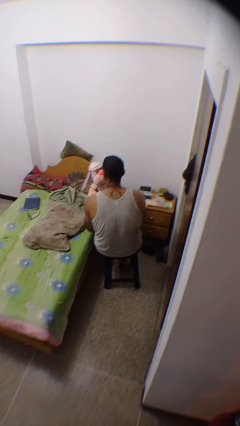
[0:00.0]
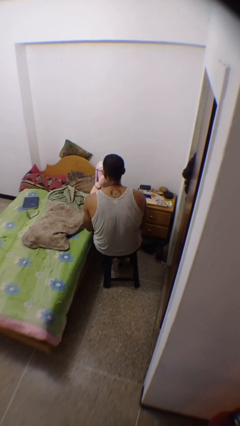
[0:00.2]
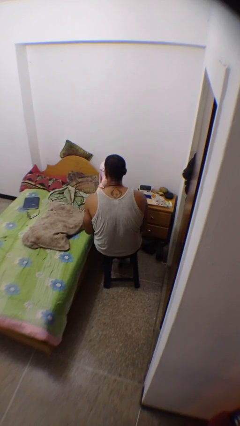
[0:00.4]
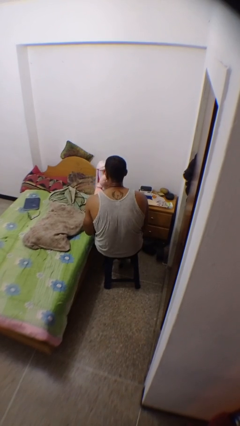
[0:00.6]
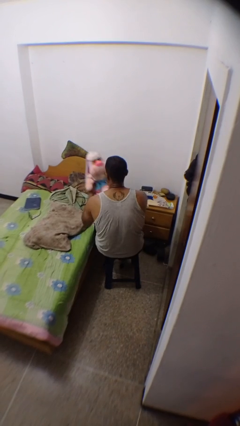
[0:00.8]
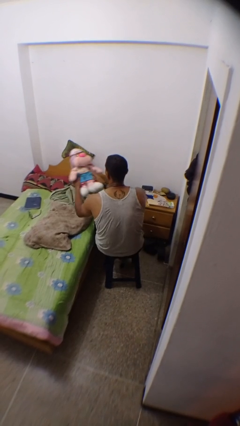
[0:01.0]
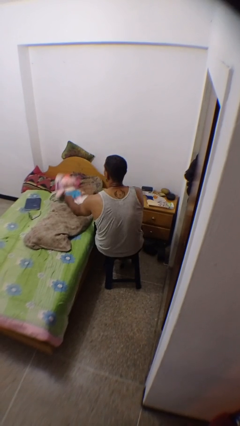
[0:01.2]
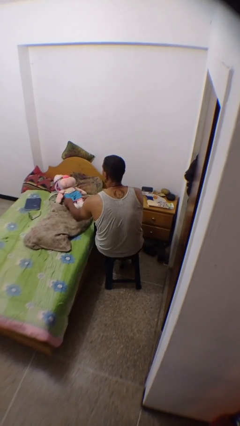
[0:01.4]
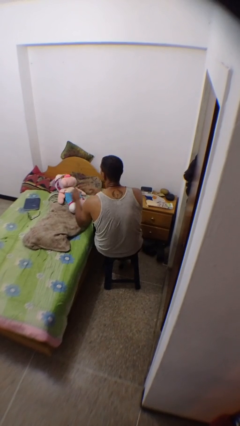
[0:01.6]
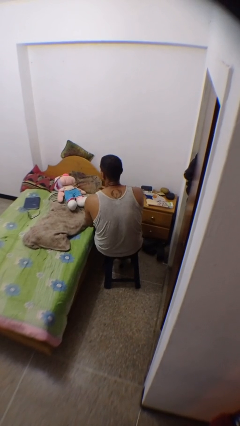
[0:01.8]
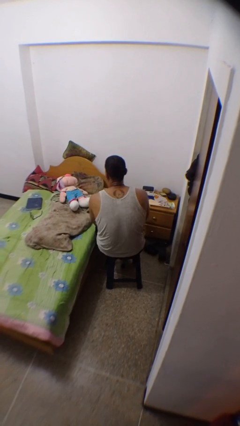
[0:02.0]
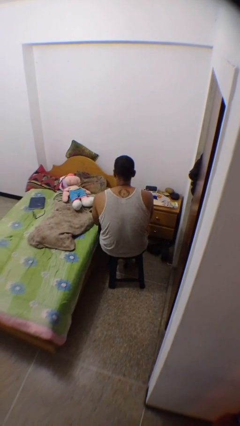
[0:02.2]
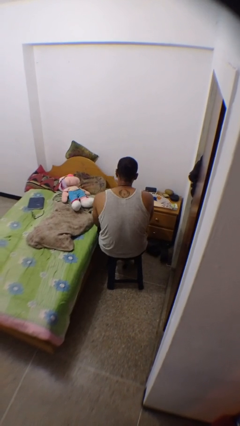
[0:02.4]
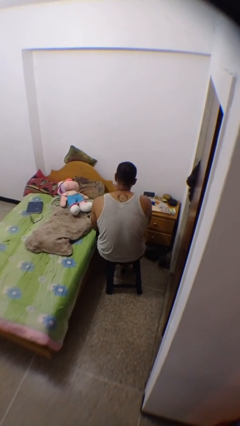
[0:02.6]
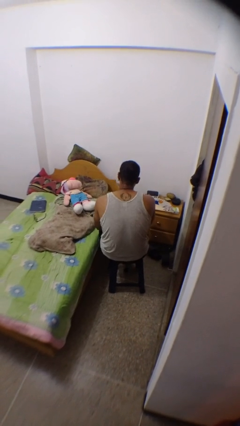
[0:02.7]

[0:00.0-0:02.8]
person puts down object on bed

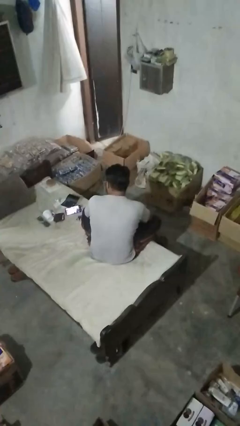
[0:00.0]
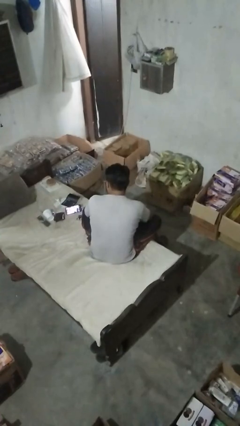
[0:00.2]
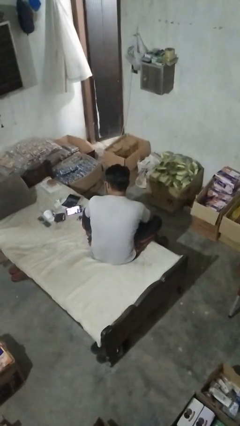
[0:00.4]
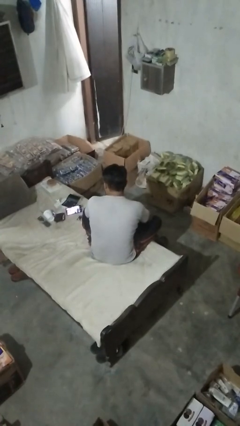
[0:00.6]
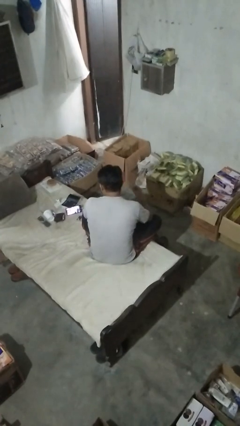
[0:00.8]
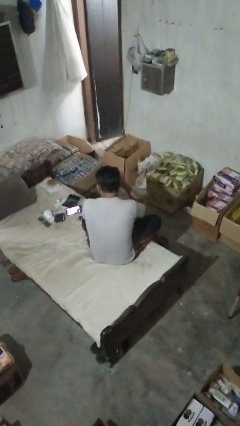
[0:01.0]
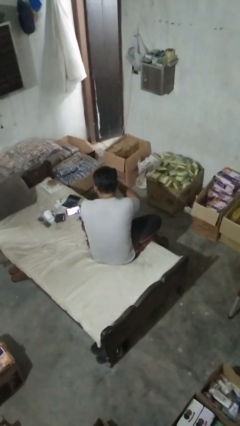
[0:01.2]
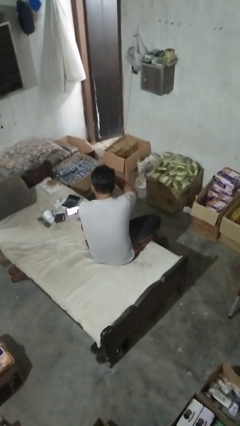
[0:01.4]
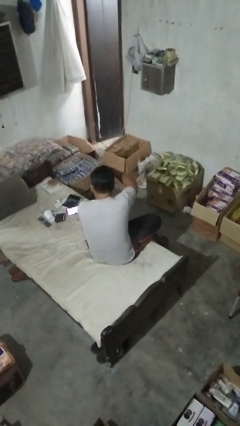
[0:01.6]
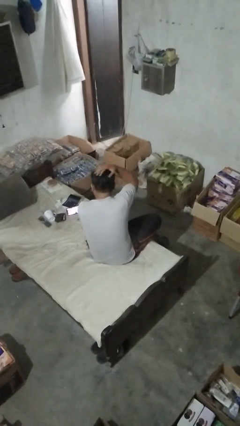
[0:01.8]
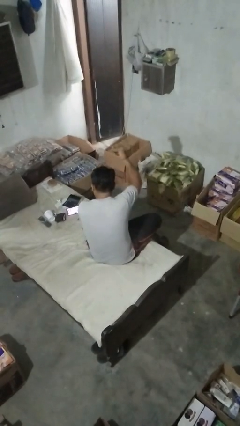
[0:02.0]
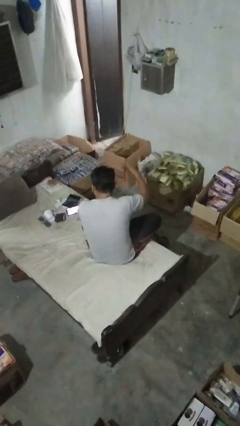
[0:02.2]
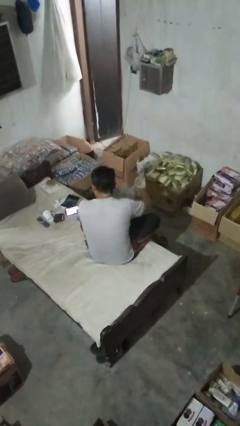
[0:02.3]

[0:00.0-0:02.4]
person strokes hair

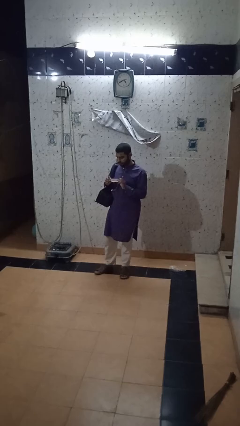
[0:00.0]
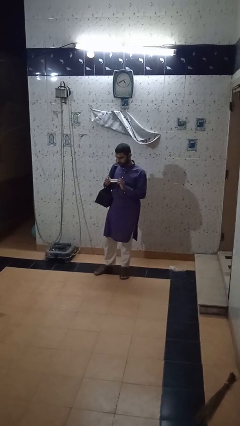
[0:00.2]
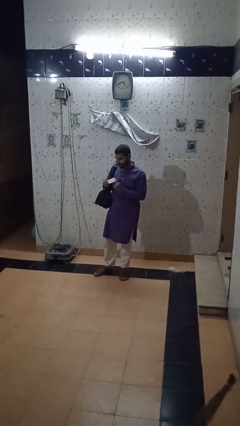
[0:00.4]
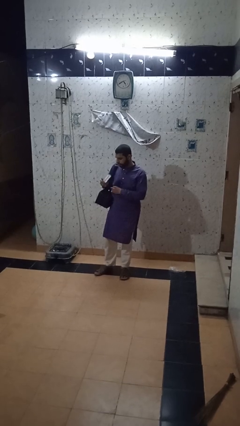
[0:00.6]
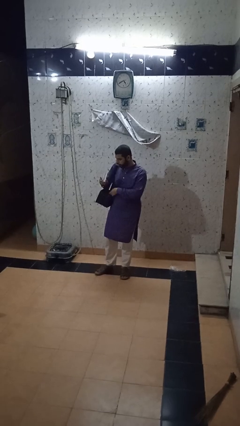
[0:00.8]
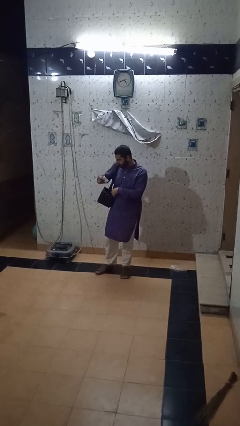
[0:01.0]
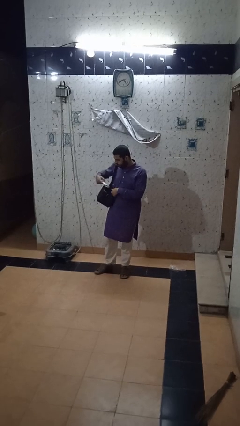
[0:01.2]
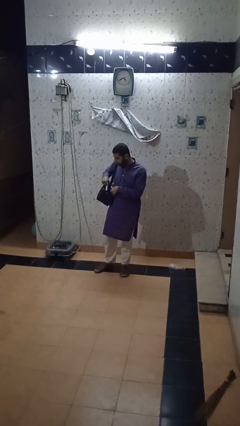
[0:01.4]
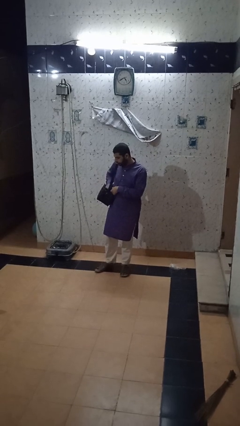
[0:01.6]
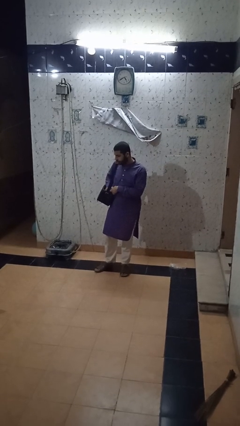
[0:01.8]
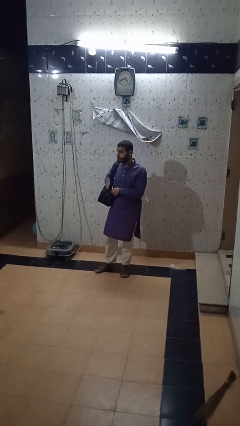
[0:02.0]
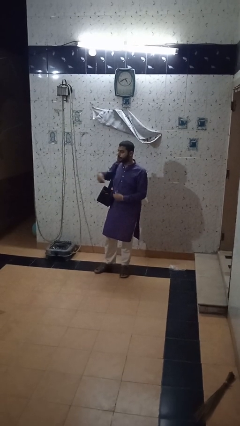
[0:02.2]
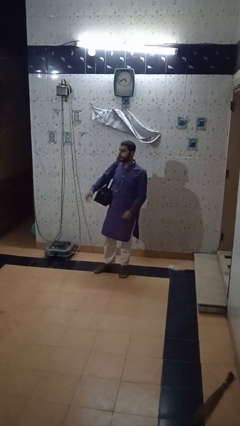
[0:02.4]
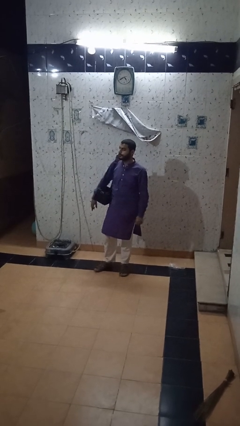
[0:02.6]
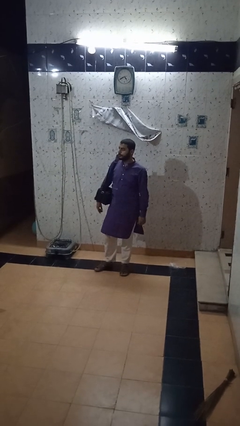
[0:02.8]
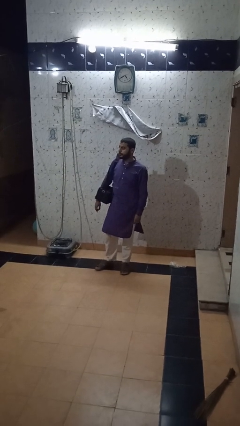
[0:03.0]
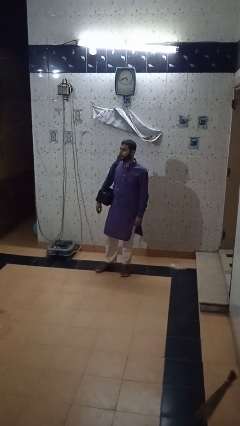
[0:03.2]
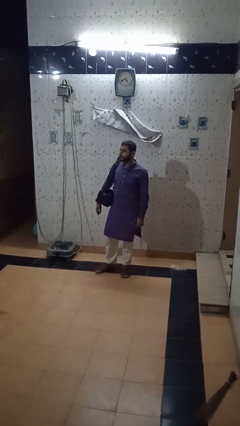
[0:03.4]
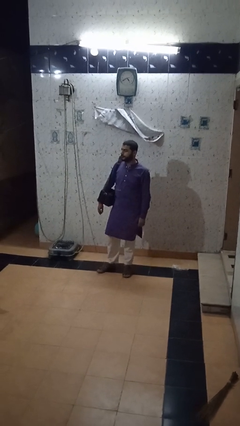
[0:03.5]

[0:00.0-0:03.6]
person puts object into backpack

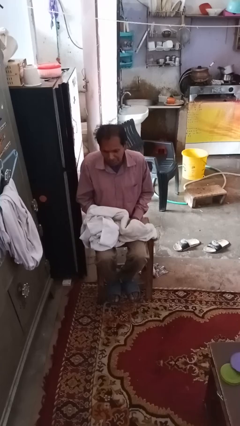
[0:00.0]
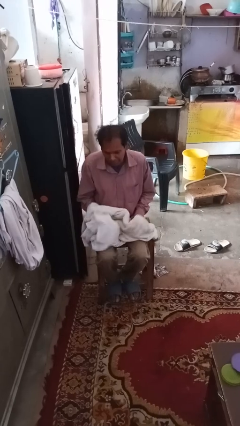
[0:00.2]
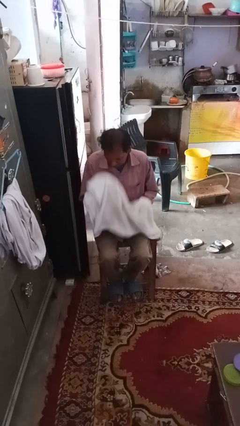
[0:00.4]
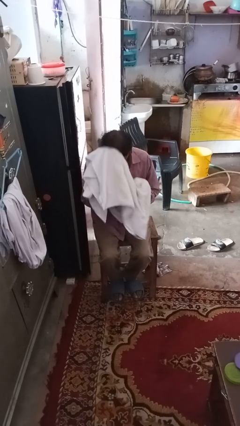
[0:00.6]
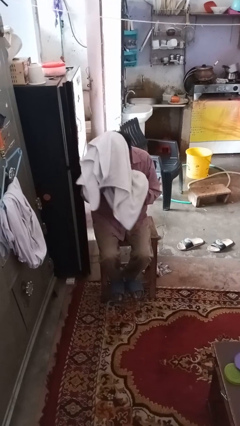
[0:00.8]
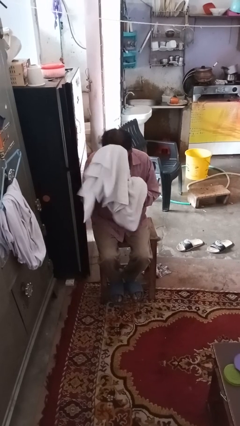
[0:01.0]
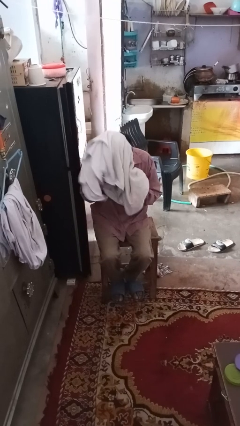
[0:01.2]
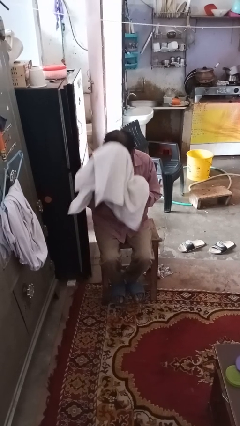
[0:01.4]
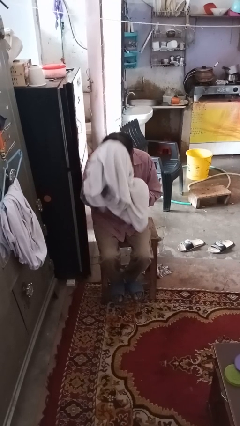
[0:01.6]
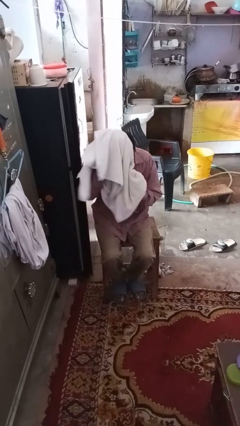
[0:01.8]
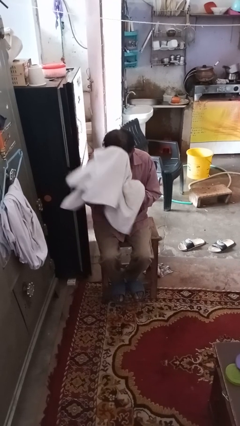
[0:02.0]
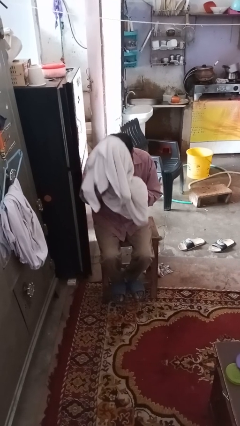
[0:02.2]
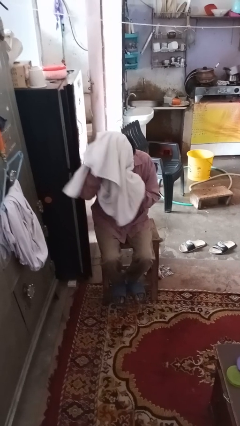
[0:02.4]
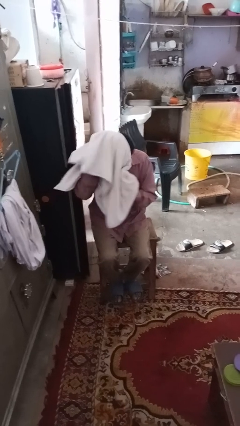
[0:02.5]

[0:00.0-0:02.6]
person dries hair with towel

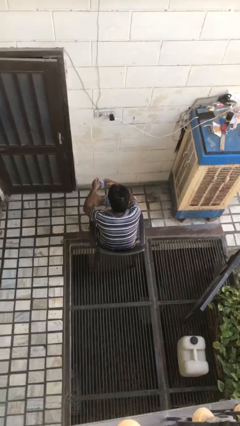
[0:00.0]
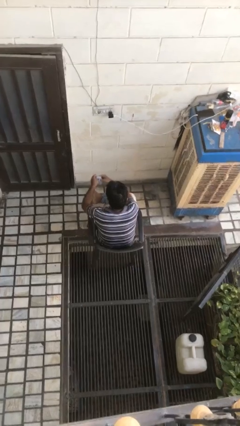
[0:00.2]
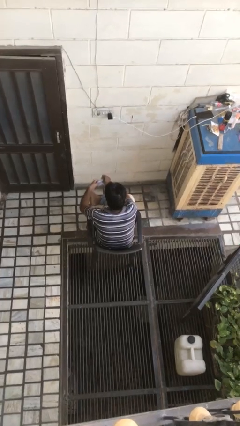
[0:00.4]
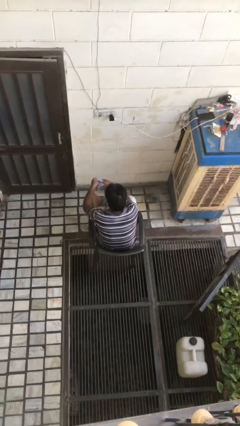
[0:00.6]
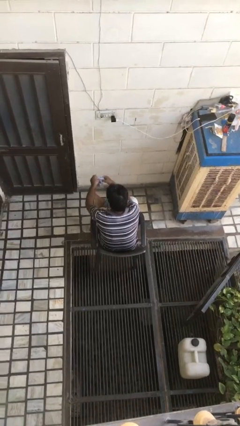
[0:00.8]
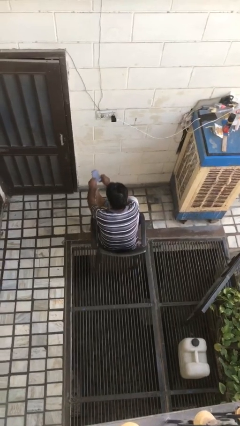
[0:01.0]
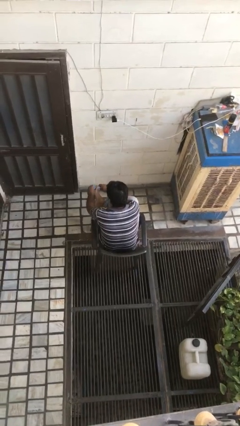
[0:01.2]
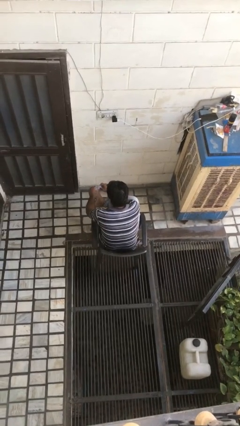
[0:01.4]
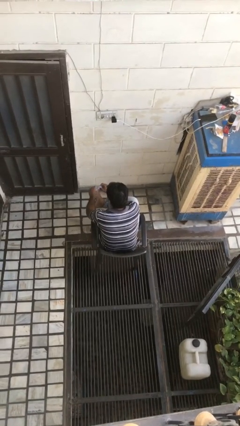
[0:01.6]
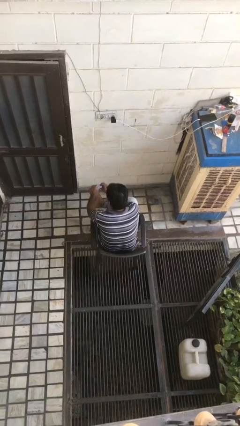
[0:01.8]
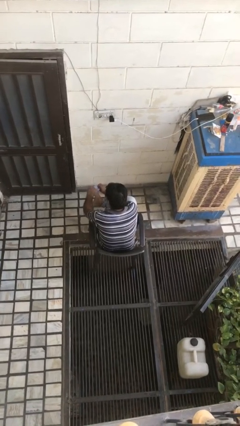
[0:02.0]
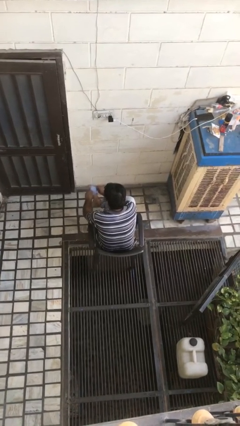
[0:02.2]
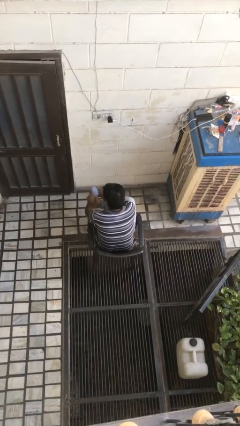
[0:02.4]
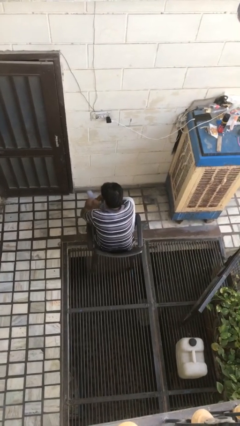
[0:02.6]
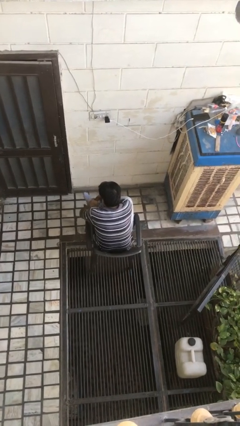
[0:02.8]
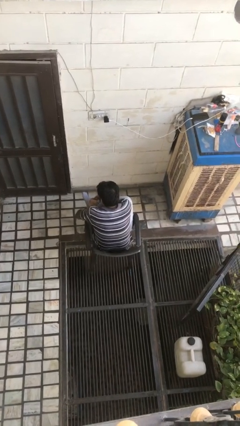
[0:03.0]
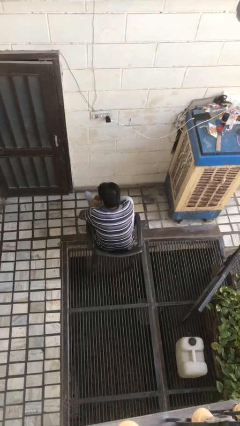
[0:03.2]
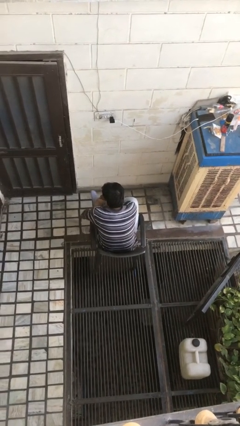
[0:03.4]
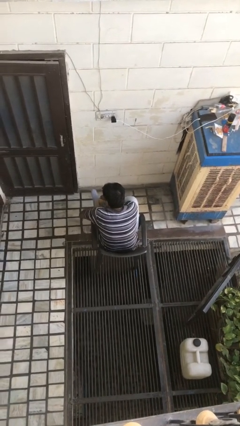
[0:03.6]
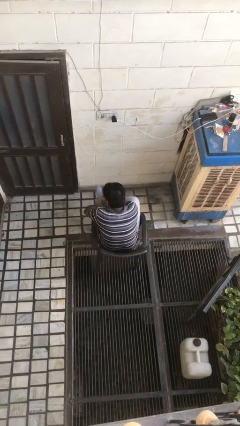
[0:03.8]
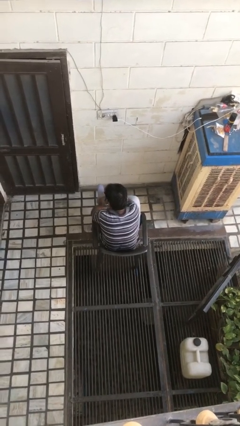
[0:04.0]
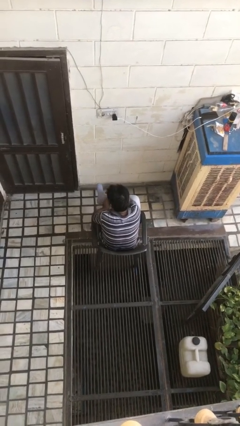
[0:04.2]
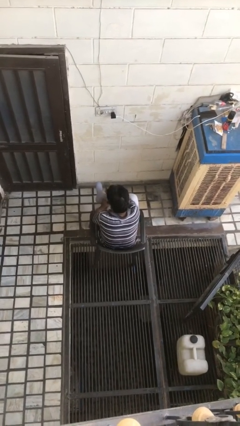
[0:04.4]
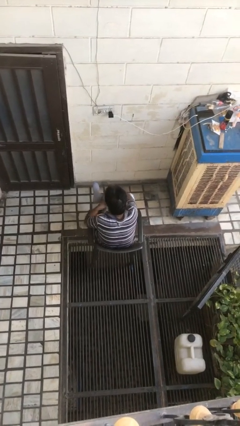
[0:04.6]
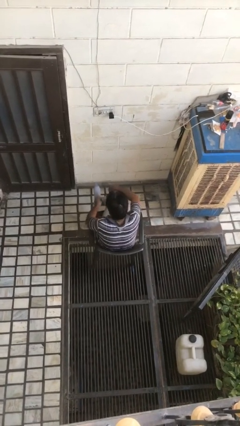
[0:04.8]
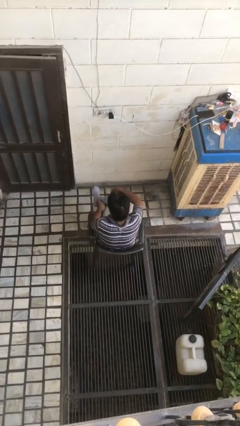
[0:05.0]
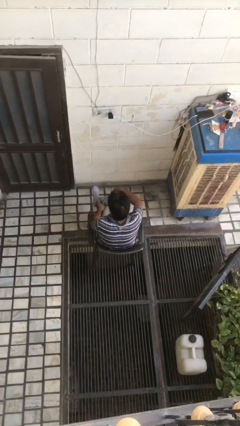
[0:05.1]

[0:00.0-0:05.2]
person puts on socks

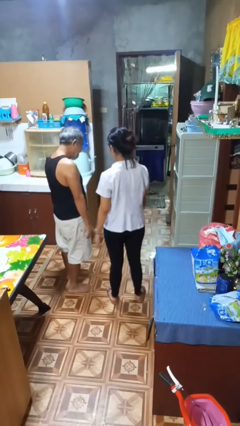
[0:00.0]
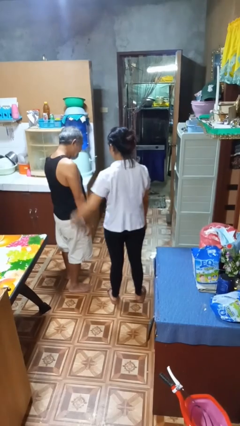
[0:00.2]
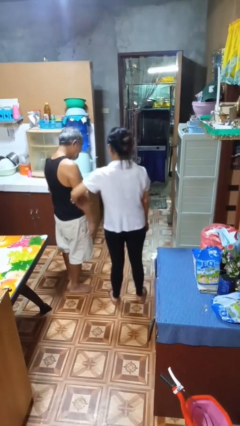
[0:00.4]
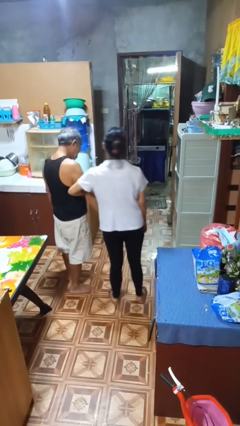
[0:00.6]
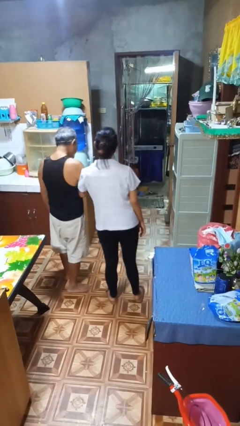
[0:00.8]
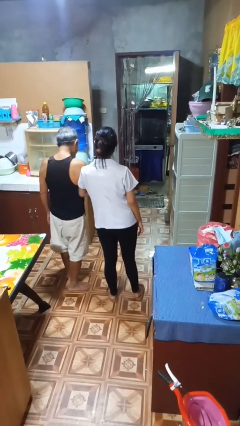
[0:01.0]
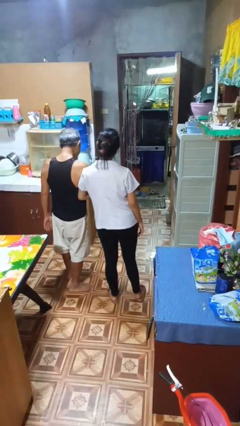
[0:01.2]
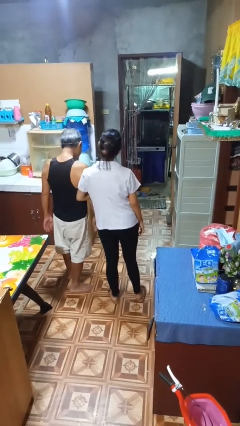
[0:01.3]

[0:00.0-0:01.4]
person grabs person by forearm
